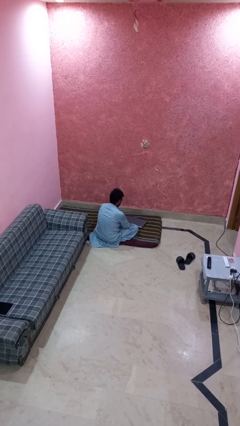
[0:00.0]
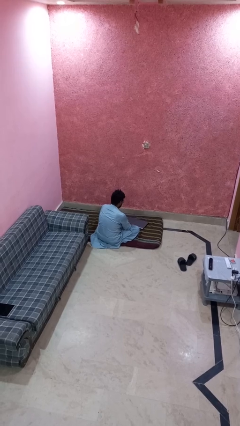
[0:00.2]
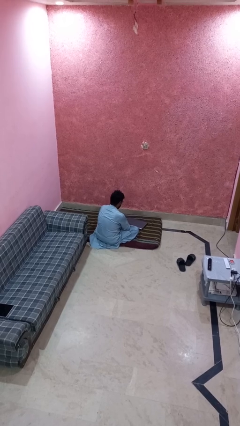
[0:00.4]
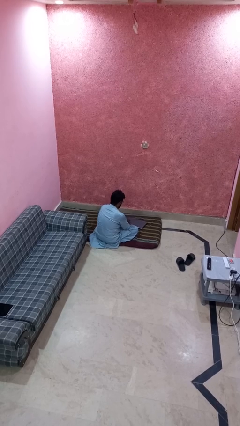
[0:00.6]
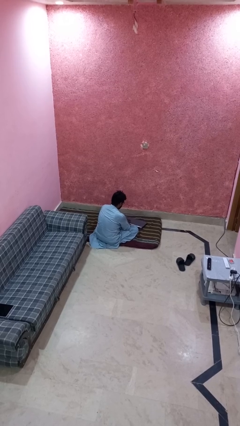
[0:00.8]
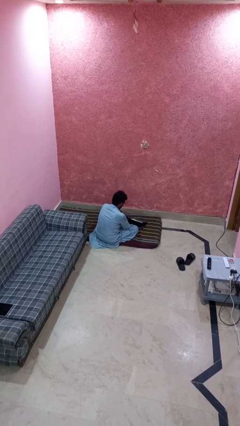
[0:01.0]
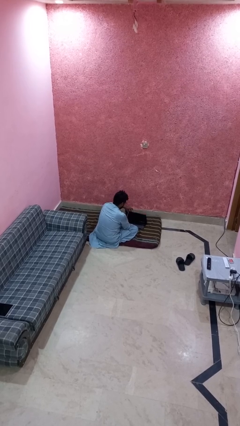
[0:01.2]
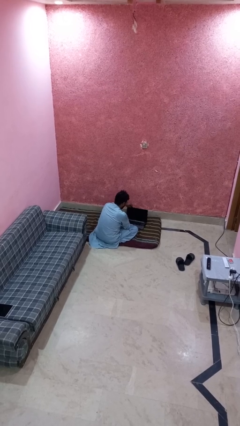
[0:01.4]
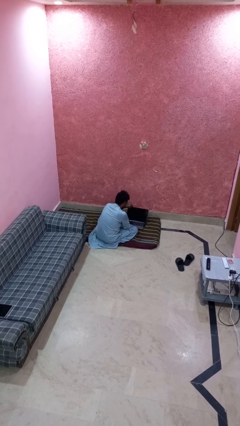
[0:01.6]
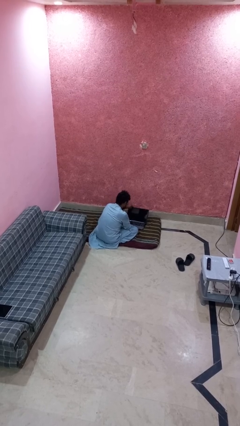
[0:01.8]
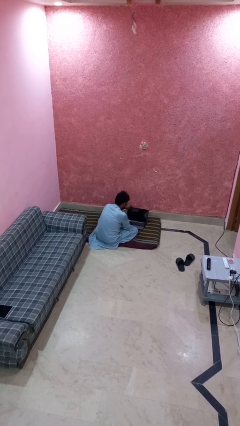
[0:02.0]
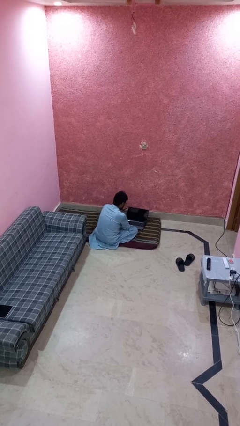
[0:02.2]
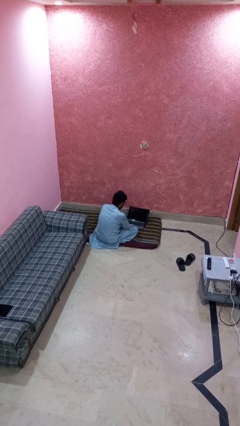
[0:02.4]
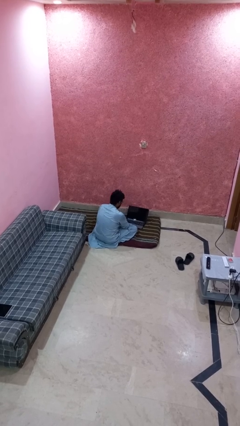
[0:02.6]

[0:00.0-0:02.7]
person opens laptop

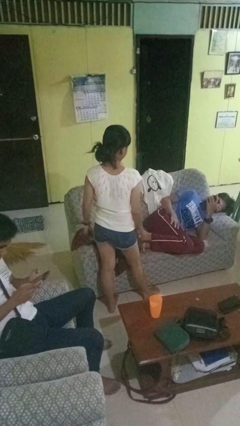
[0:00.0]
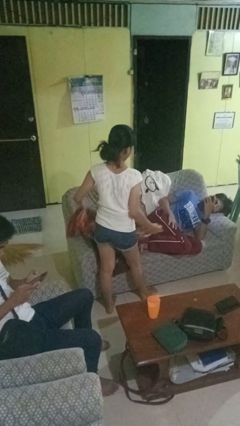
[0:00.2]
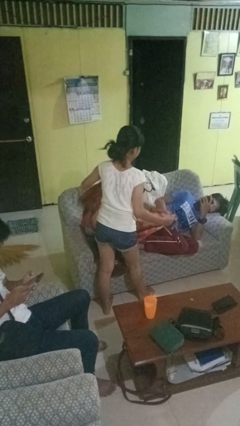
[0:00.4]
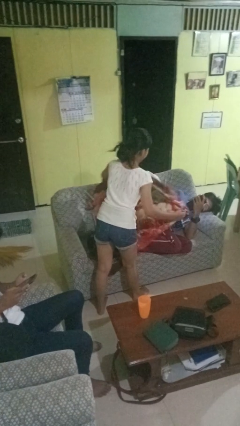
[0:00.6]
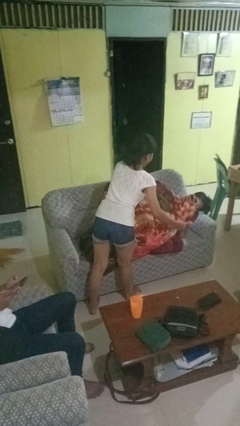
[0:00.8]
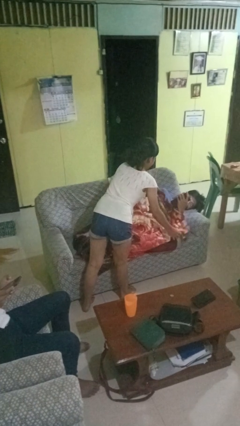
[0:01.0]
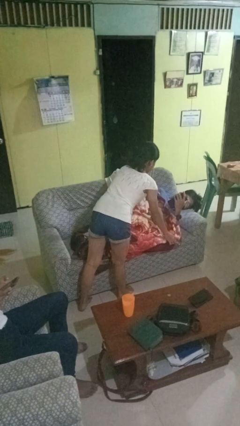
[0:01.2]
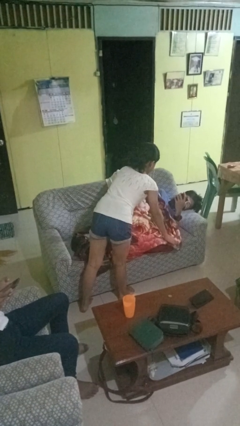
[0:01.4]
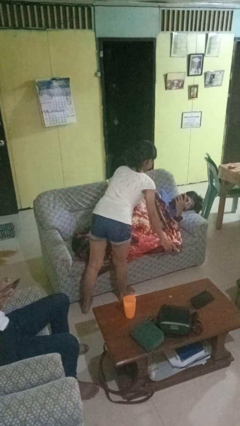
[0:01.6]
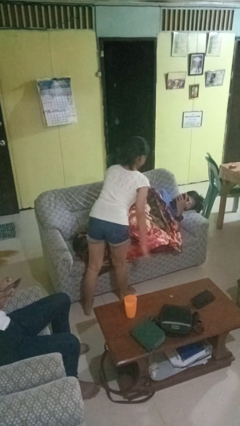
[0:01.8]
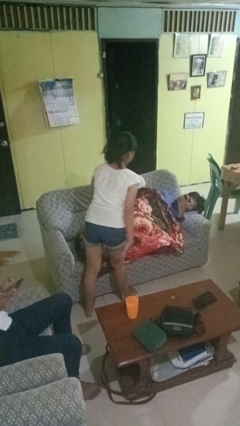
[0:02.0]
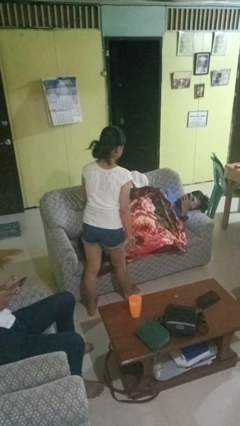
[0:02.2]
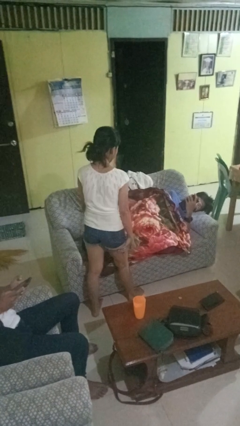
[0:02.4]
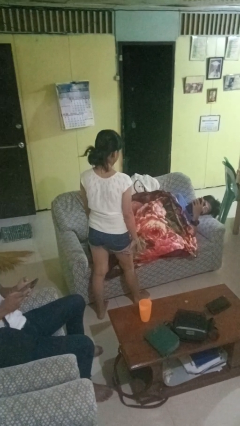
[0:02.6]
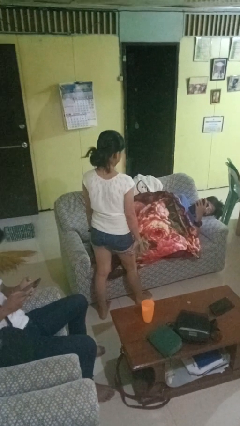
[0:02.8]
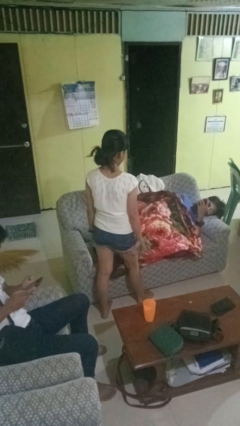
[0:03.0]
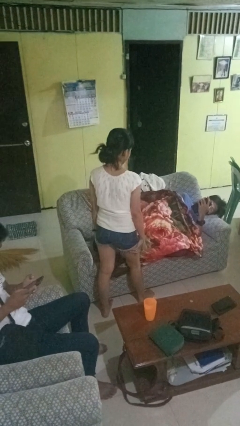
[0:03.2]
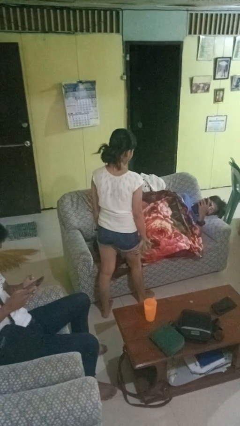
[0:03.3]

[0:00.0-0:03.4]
person covers friend with blanket

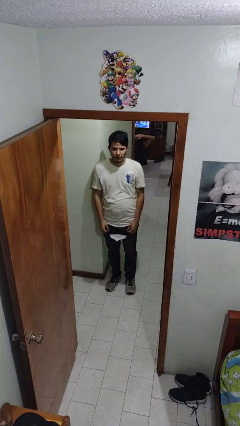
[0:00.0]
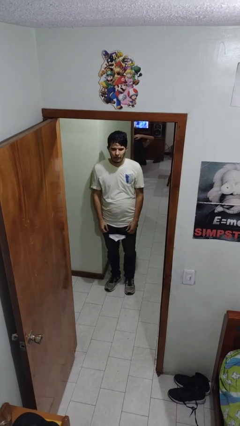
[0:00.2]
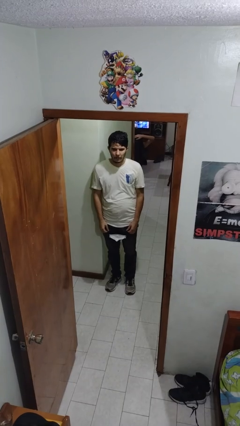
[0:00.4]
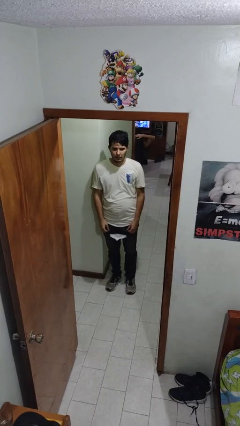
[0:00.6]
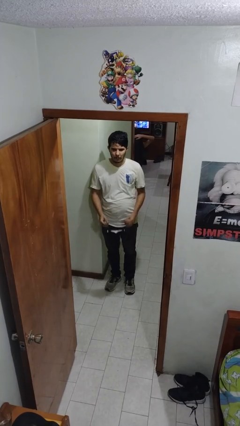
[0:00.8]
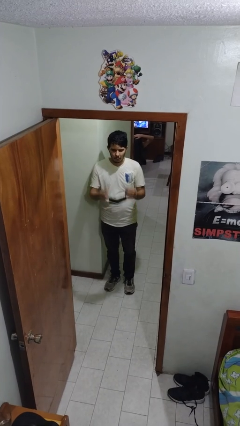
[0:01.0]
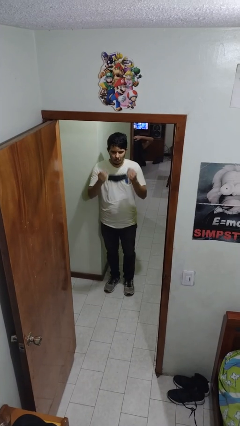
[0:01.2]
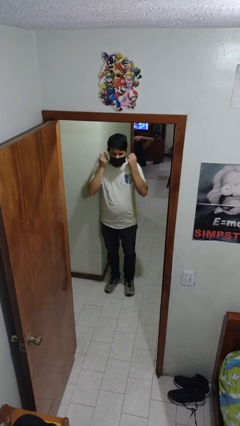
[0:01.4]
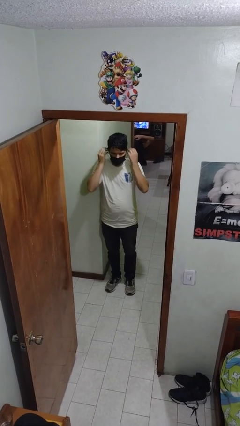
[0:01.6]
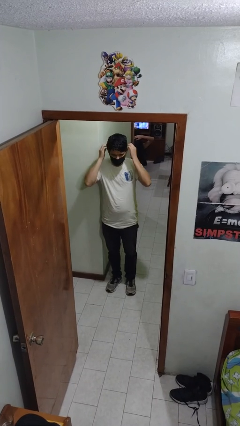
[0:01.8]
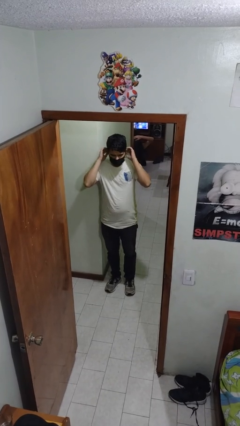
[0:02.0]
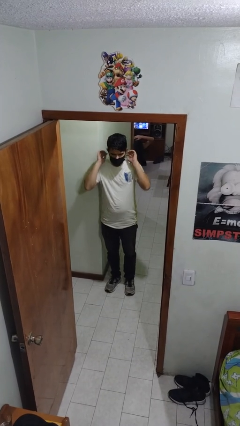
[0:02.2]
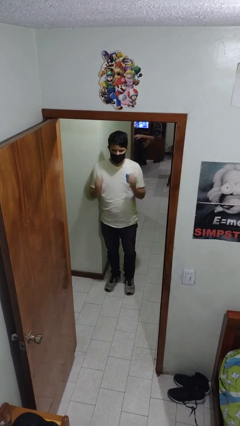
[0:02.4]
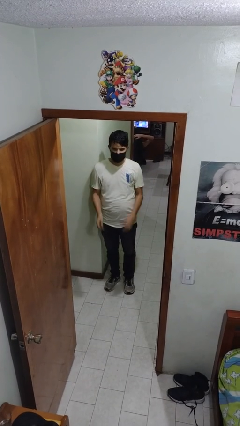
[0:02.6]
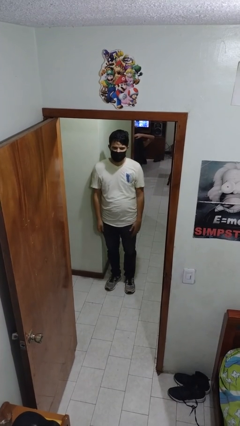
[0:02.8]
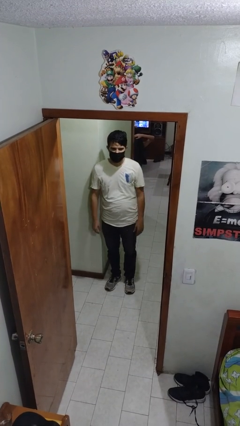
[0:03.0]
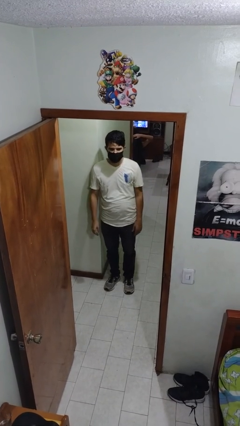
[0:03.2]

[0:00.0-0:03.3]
person puts on facemask

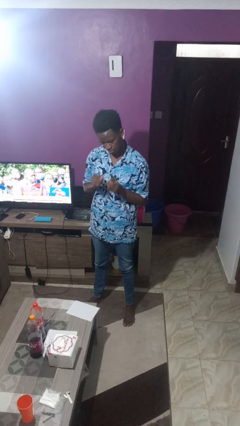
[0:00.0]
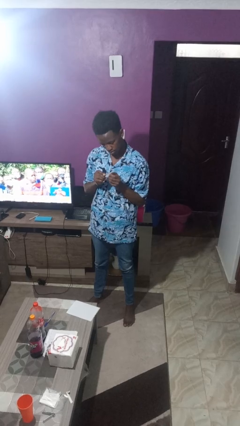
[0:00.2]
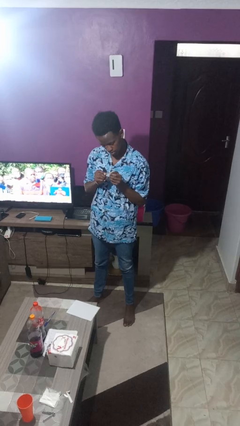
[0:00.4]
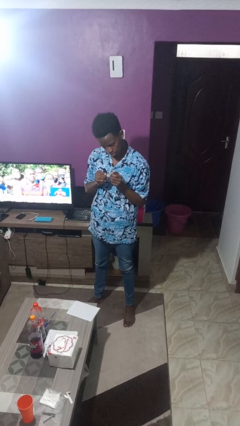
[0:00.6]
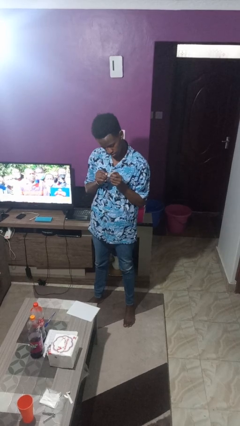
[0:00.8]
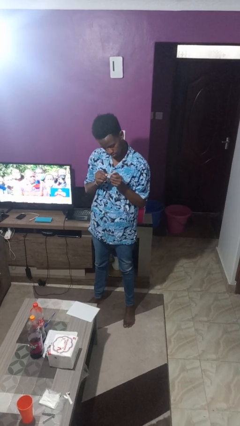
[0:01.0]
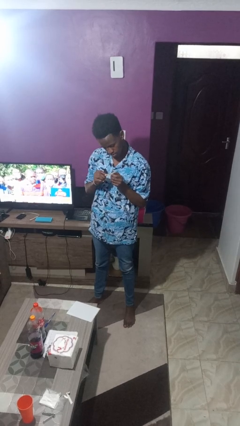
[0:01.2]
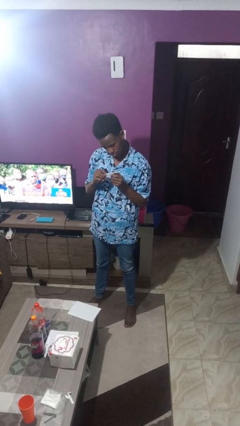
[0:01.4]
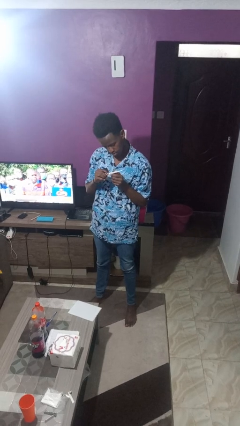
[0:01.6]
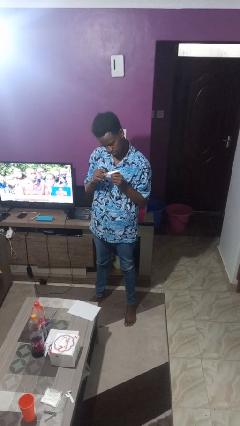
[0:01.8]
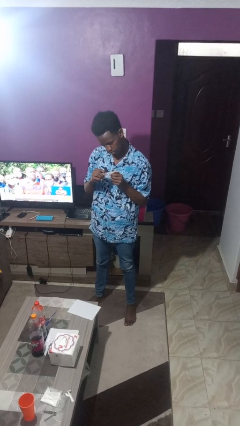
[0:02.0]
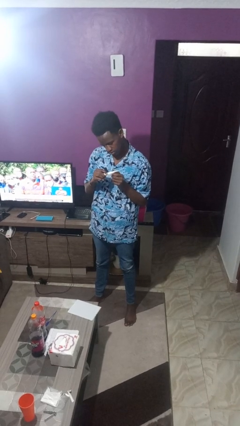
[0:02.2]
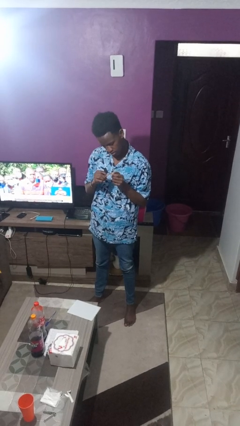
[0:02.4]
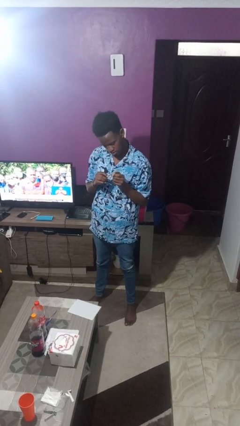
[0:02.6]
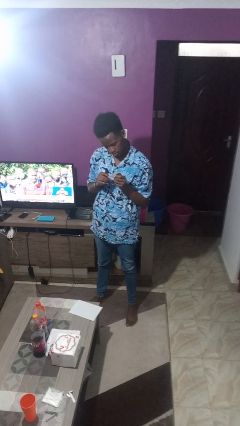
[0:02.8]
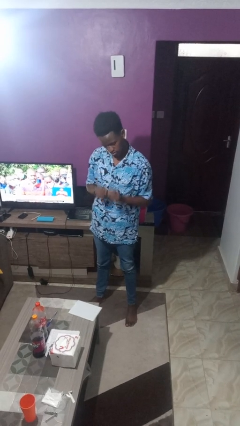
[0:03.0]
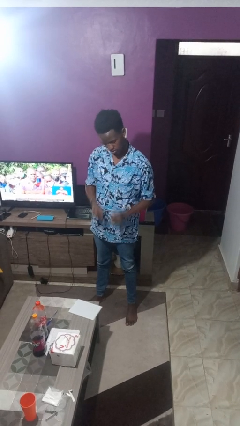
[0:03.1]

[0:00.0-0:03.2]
person files fingernails

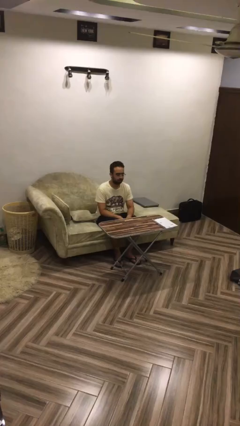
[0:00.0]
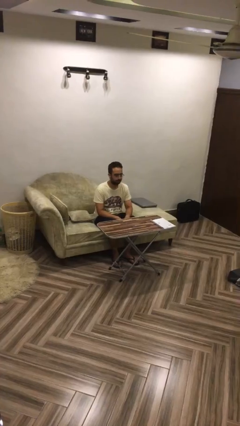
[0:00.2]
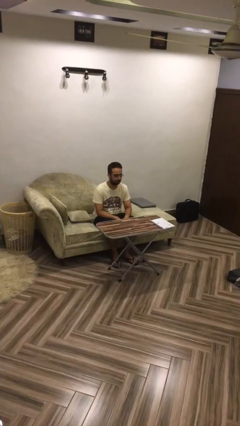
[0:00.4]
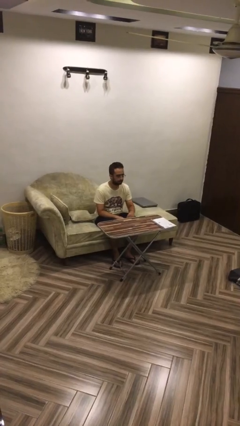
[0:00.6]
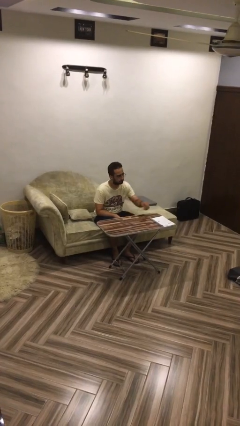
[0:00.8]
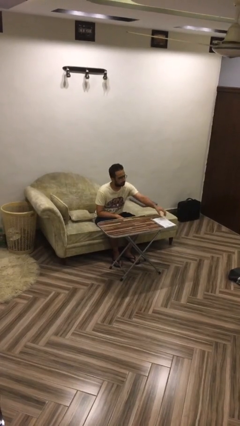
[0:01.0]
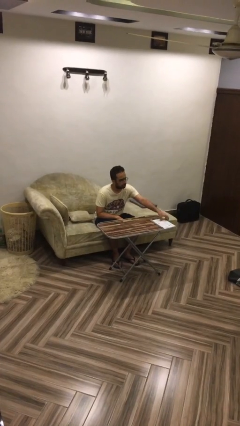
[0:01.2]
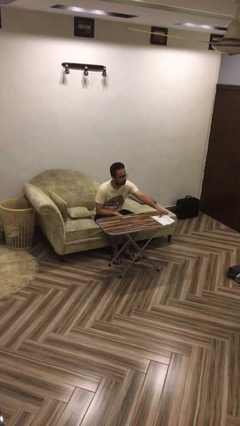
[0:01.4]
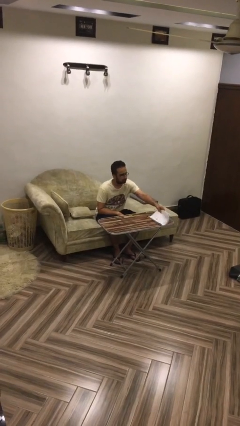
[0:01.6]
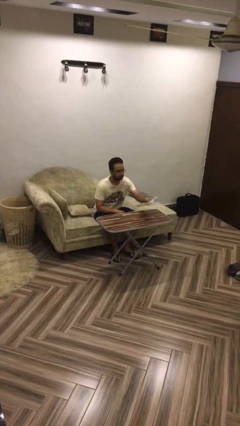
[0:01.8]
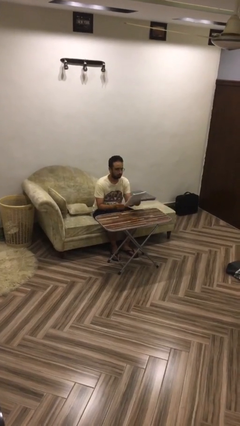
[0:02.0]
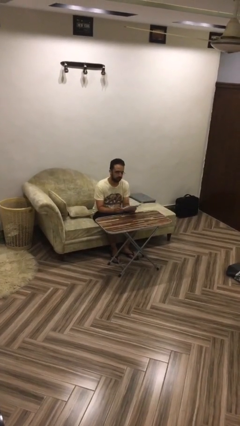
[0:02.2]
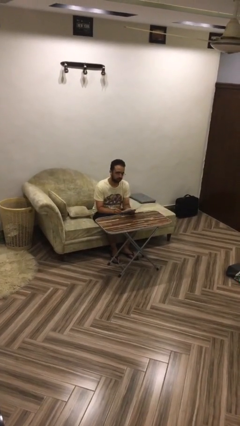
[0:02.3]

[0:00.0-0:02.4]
person picks up object from table

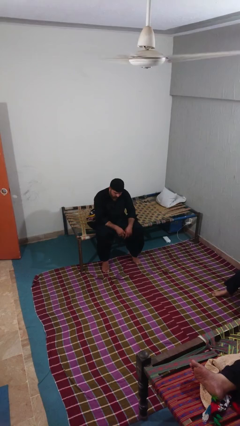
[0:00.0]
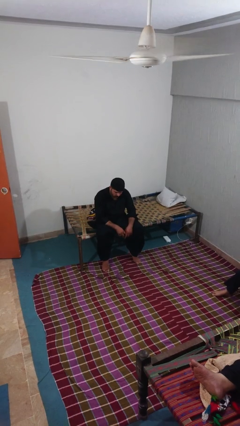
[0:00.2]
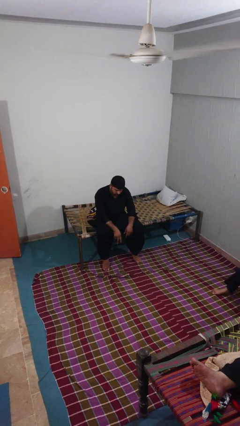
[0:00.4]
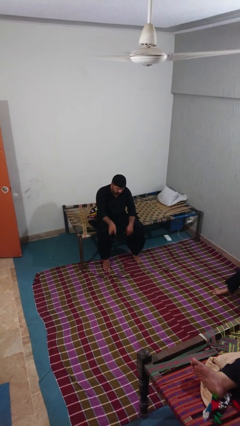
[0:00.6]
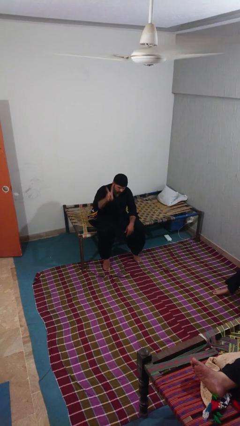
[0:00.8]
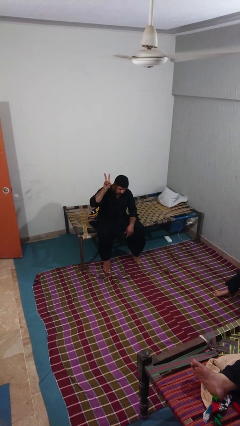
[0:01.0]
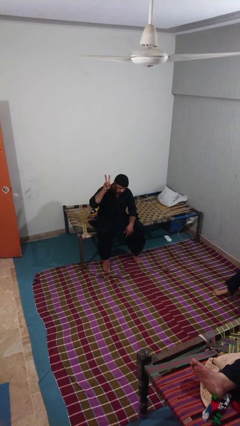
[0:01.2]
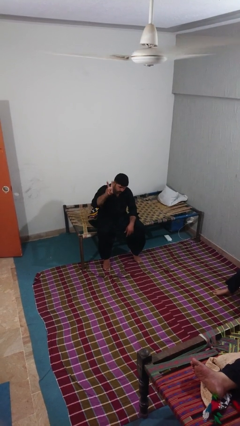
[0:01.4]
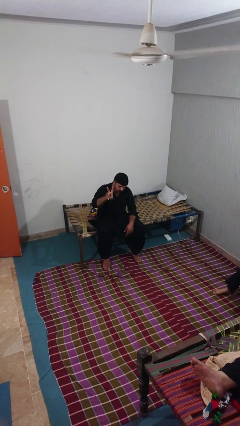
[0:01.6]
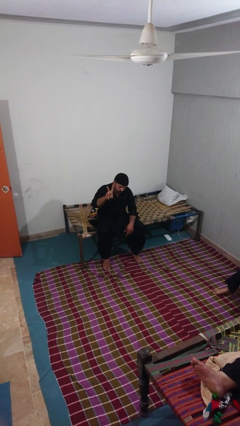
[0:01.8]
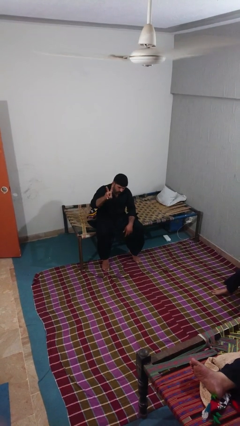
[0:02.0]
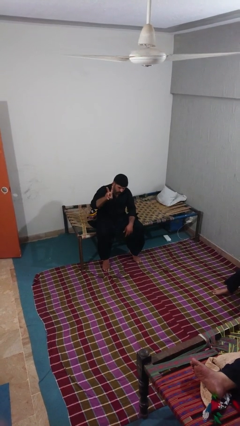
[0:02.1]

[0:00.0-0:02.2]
person gestures peace

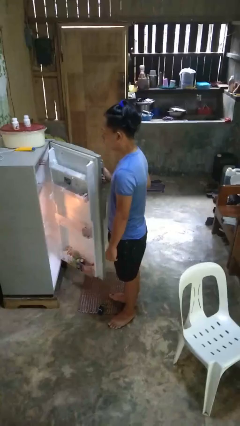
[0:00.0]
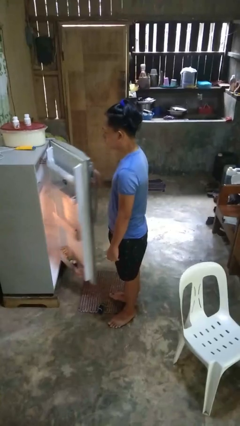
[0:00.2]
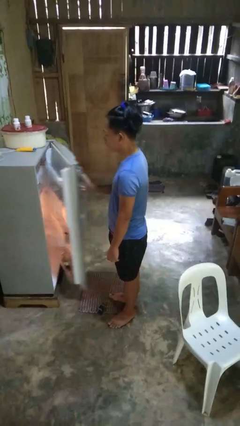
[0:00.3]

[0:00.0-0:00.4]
person closes refrigerator
